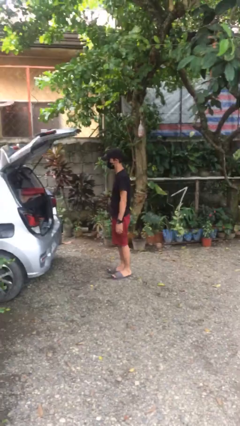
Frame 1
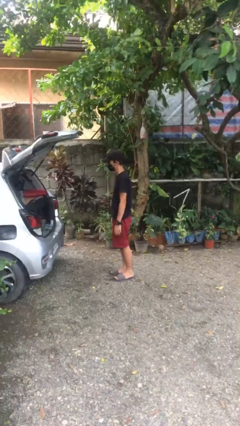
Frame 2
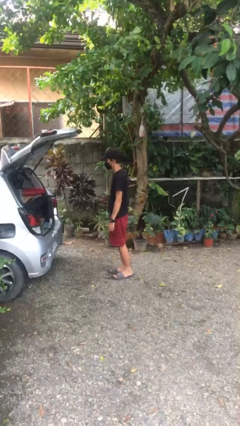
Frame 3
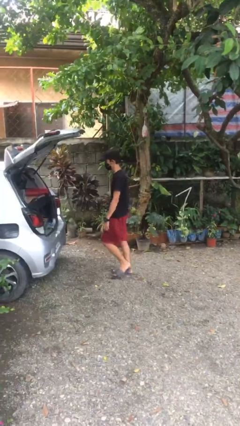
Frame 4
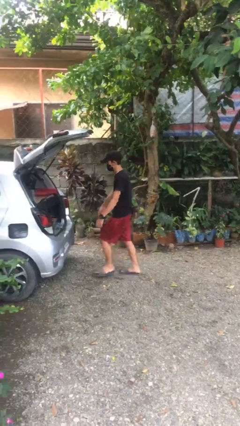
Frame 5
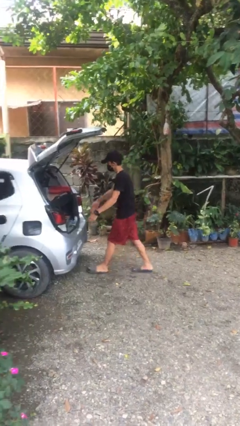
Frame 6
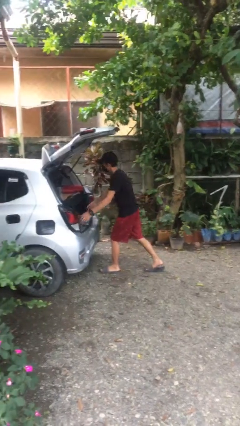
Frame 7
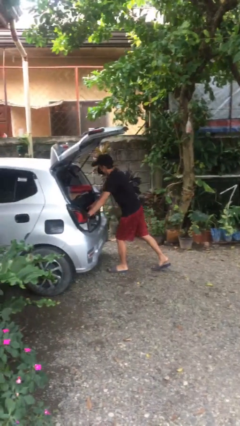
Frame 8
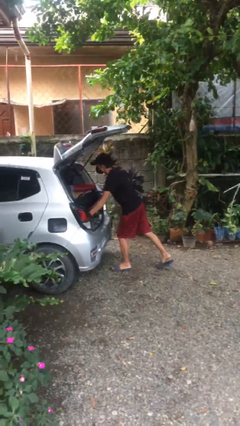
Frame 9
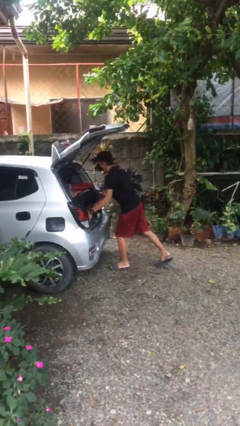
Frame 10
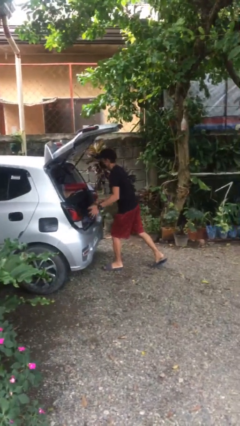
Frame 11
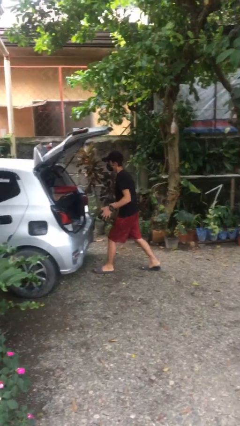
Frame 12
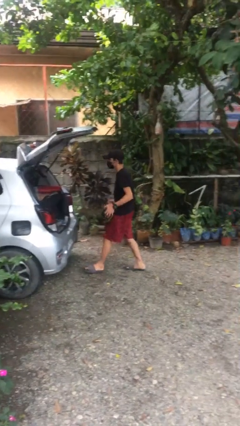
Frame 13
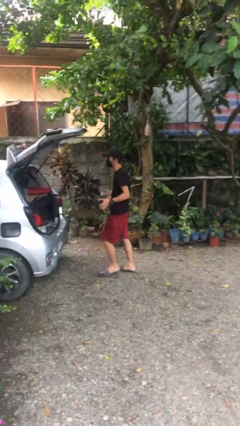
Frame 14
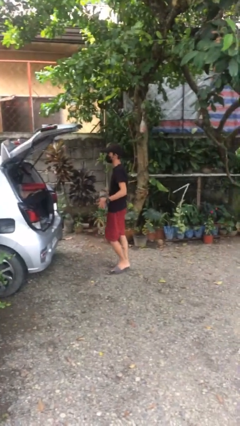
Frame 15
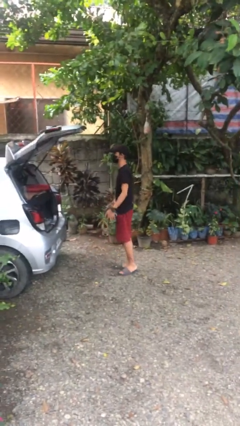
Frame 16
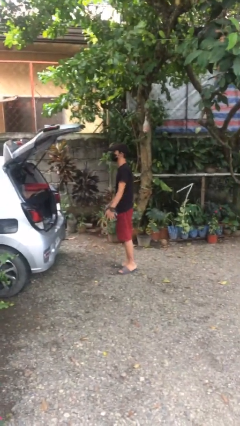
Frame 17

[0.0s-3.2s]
person unloads car

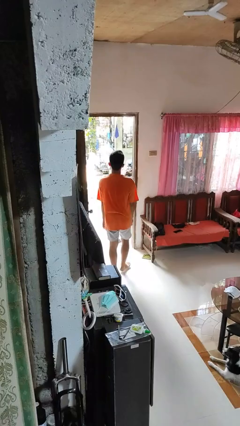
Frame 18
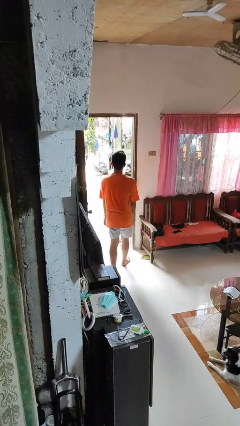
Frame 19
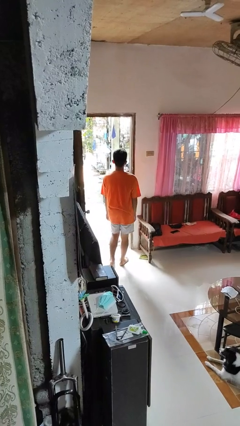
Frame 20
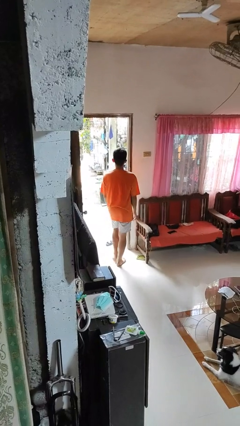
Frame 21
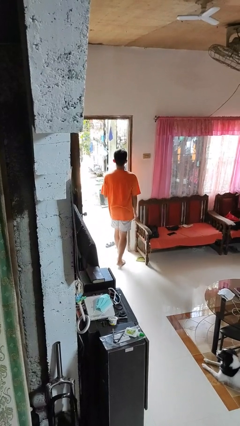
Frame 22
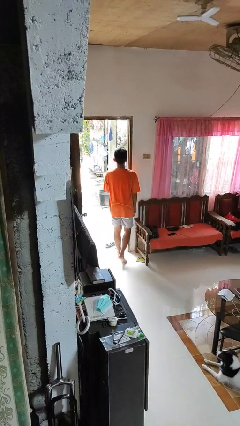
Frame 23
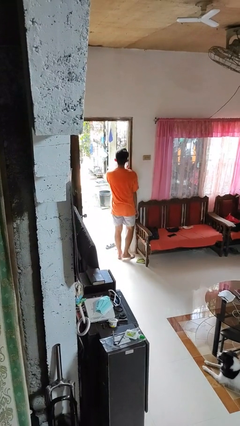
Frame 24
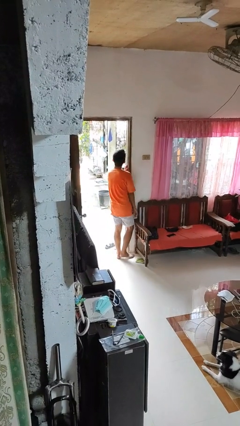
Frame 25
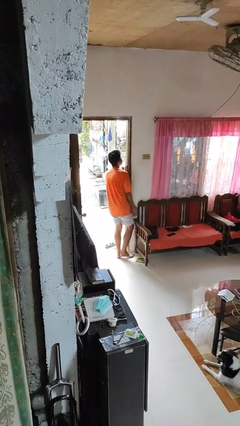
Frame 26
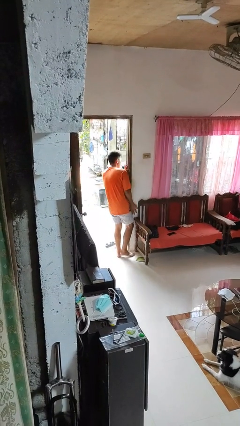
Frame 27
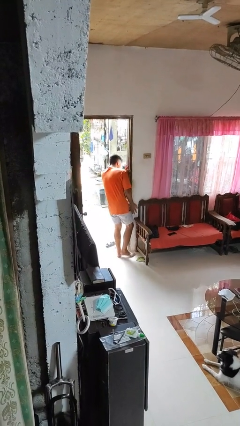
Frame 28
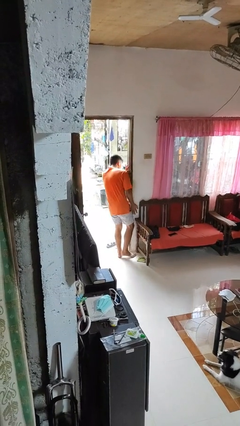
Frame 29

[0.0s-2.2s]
person bumps into wall

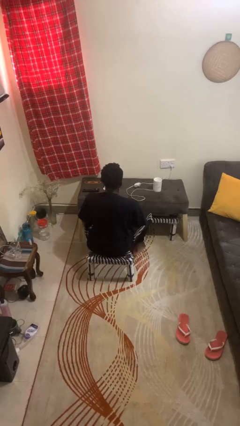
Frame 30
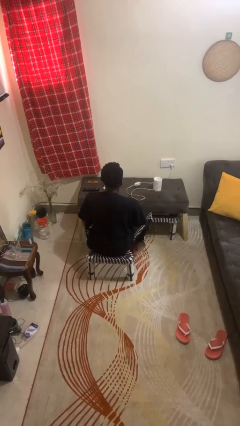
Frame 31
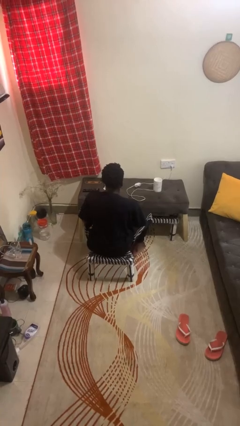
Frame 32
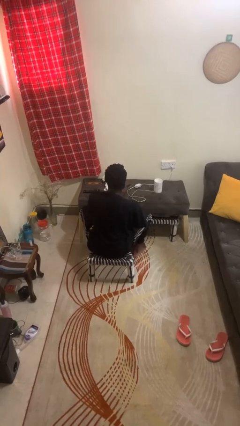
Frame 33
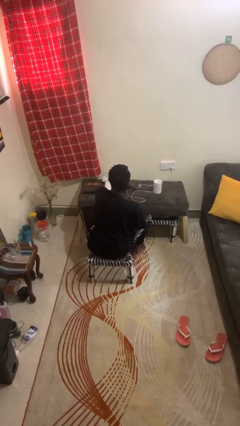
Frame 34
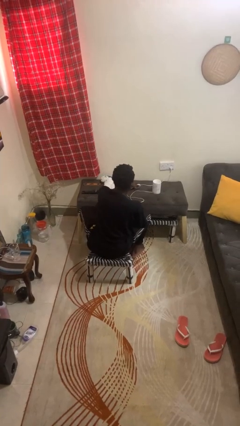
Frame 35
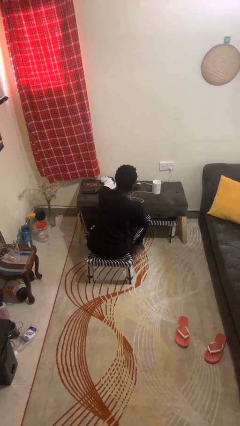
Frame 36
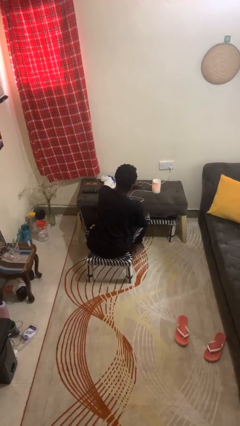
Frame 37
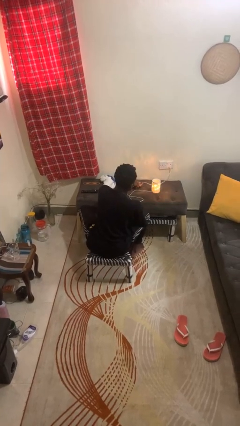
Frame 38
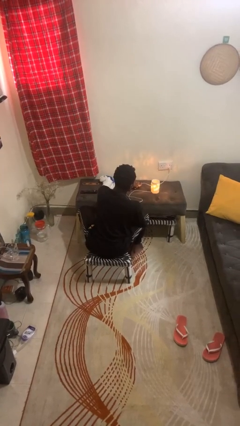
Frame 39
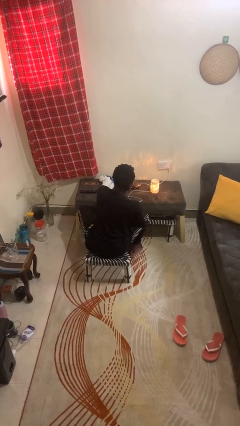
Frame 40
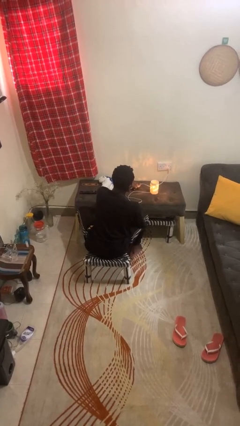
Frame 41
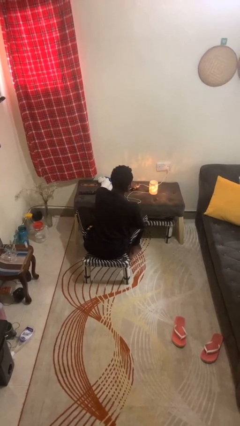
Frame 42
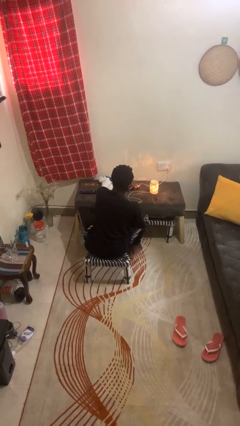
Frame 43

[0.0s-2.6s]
person turns on lamp

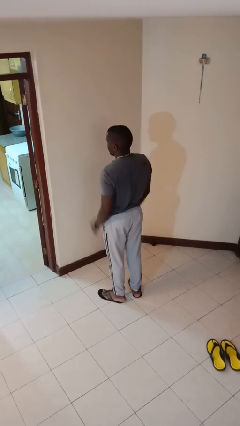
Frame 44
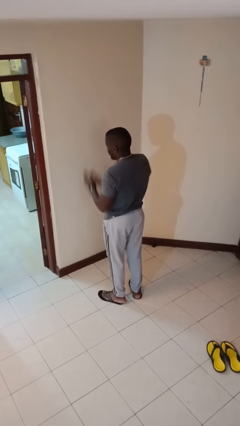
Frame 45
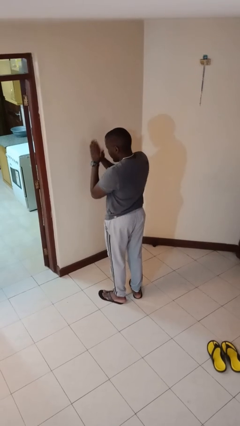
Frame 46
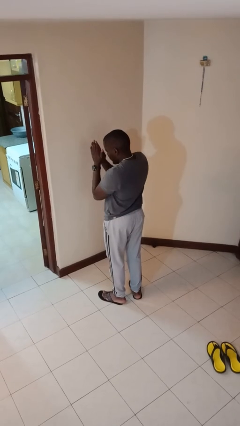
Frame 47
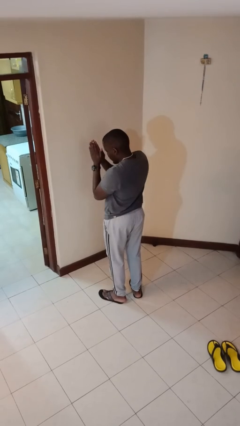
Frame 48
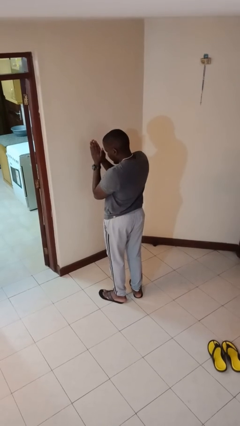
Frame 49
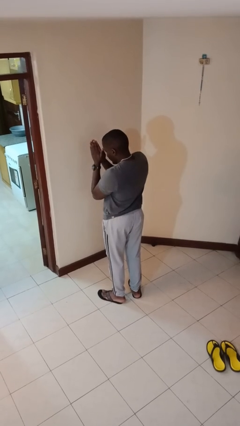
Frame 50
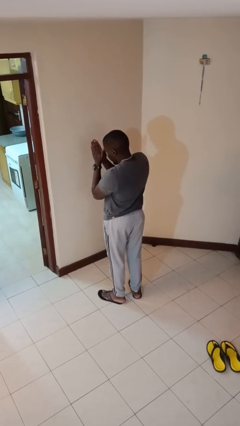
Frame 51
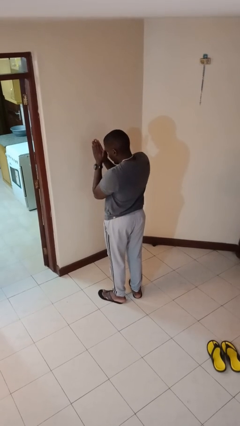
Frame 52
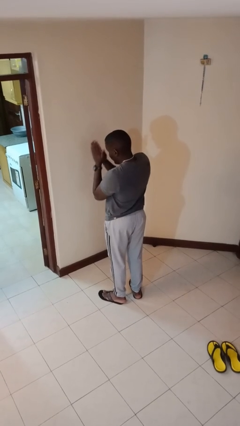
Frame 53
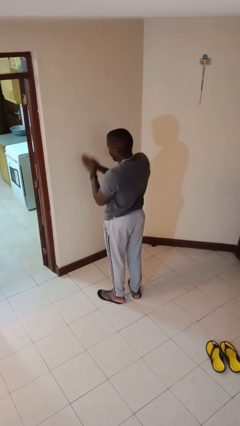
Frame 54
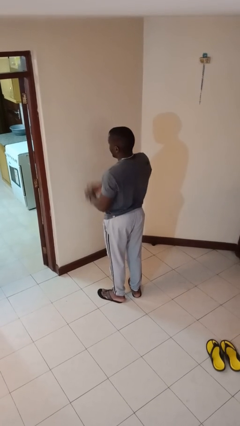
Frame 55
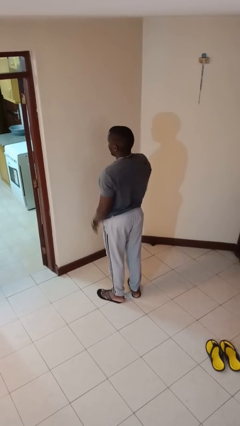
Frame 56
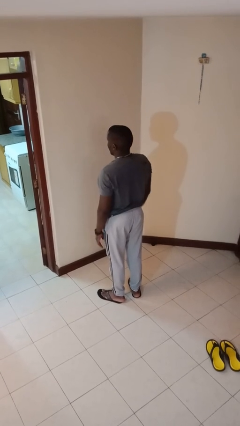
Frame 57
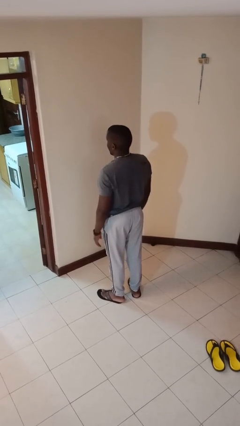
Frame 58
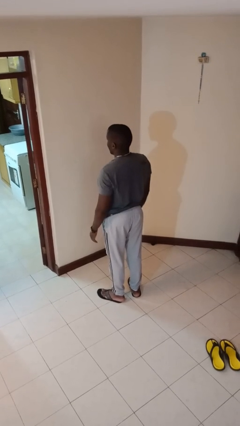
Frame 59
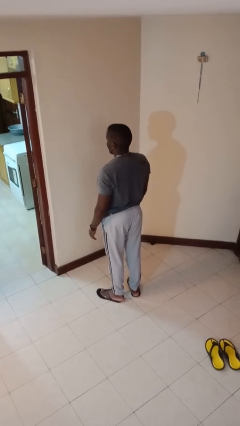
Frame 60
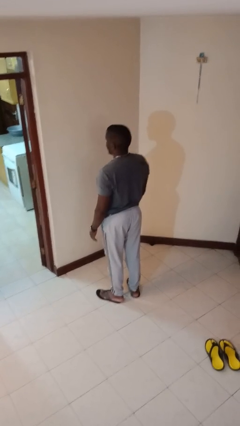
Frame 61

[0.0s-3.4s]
person prays

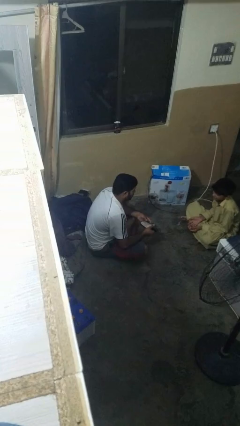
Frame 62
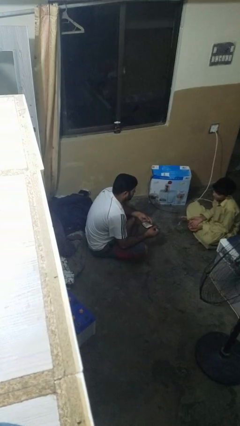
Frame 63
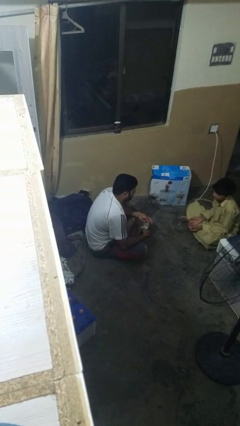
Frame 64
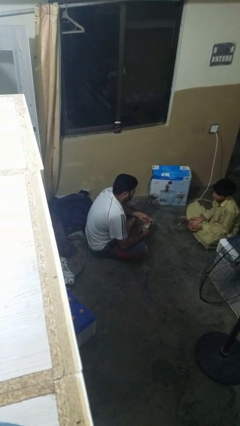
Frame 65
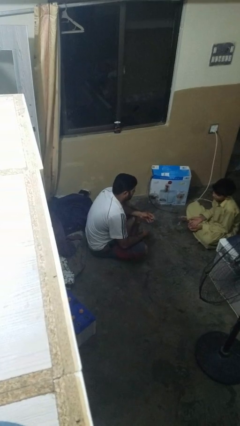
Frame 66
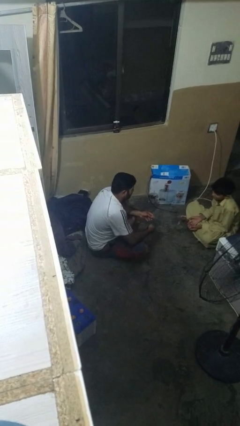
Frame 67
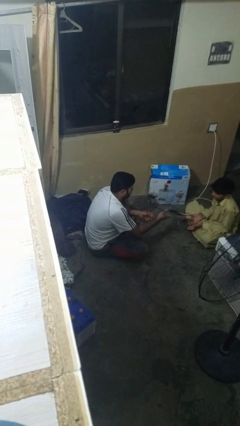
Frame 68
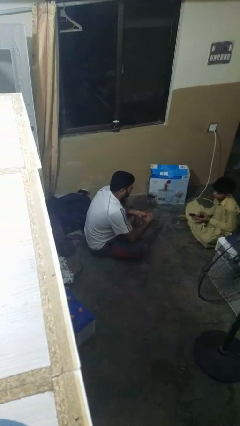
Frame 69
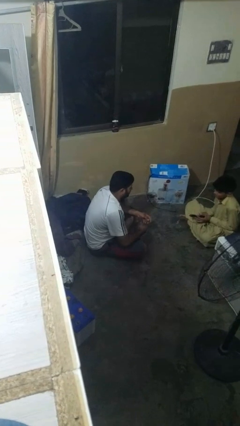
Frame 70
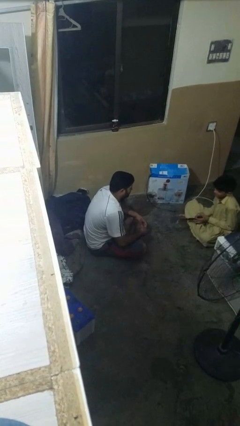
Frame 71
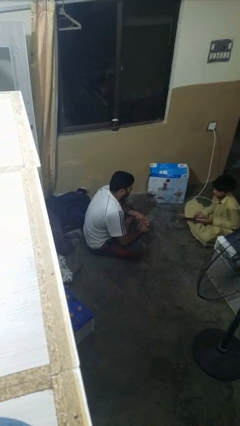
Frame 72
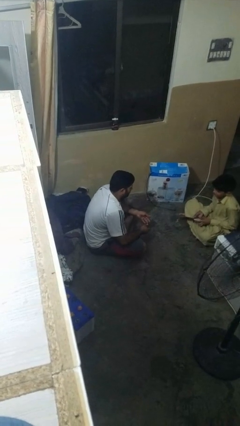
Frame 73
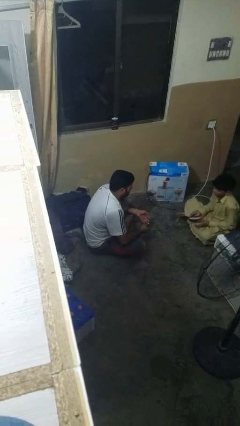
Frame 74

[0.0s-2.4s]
person throws object to person

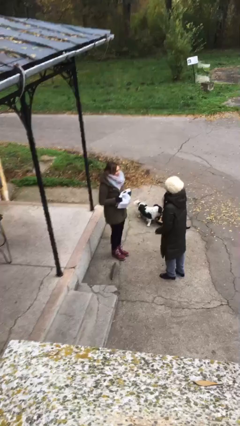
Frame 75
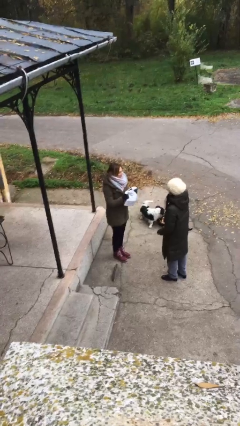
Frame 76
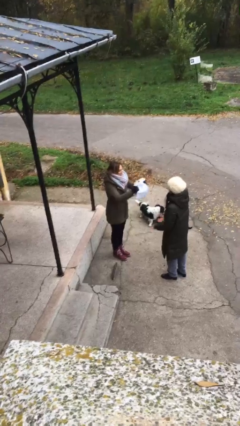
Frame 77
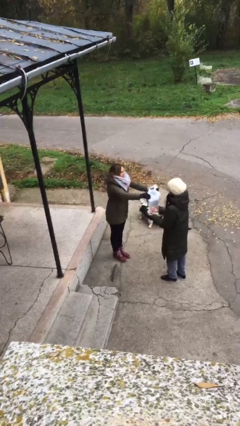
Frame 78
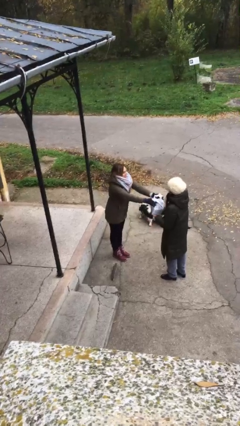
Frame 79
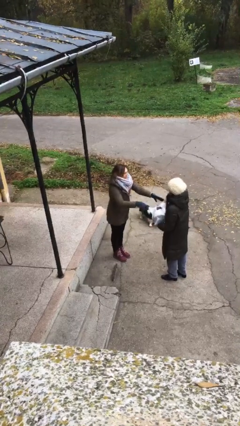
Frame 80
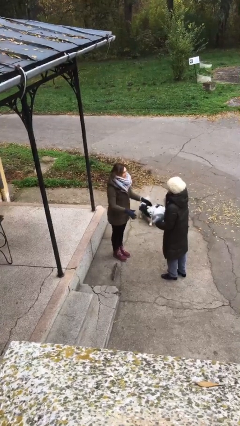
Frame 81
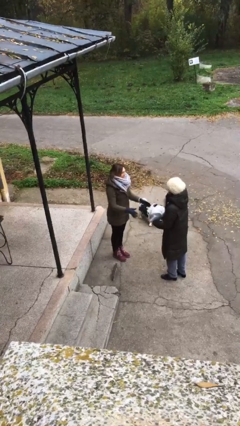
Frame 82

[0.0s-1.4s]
person transfers object to person

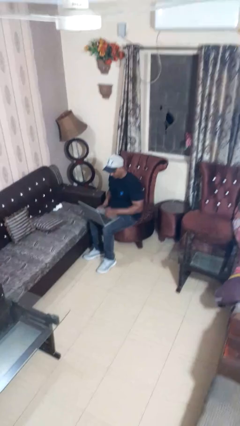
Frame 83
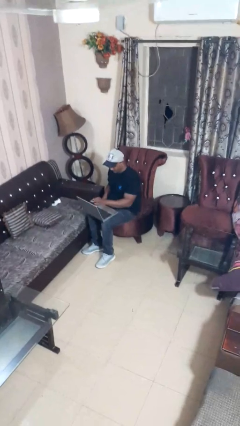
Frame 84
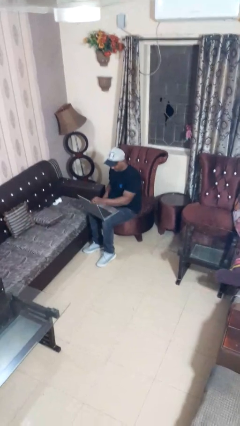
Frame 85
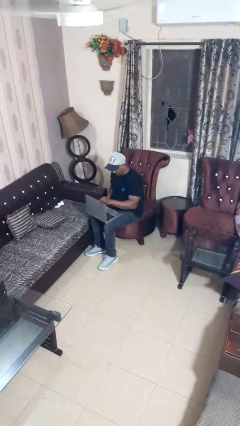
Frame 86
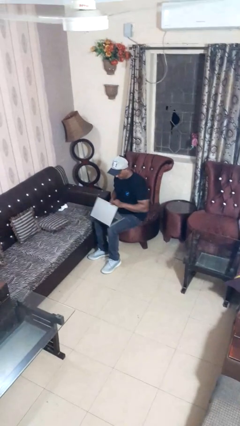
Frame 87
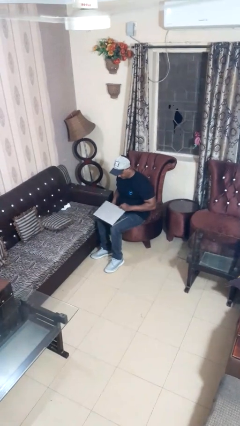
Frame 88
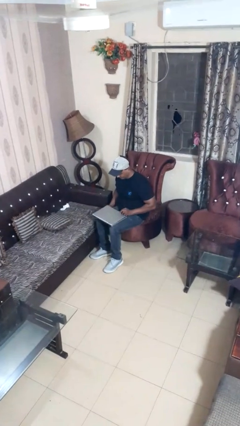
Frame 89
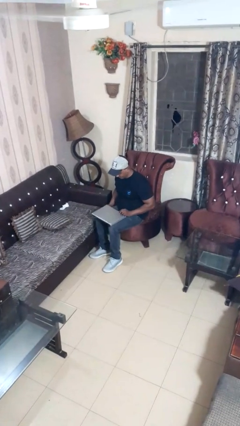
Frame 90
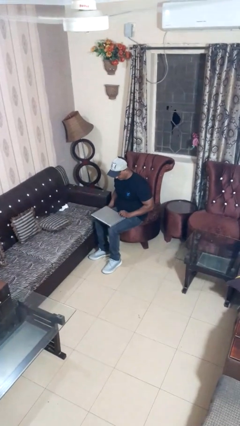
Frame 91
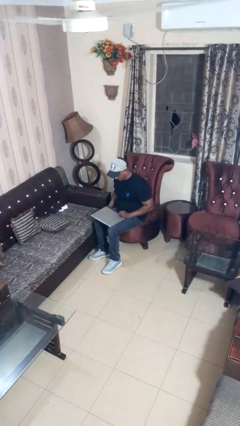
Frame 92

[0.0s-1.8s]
person closes laptop

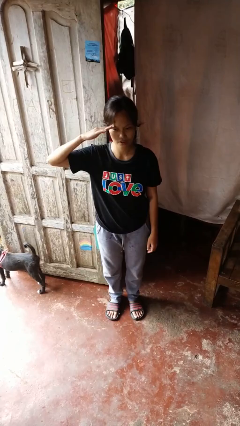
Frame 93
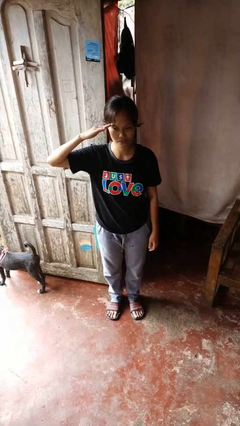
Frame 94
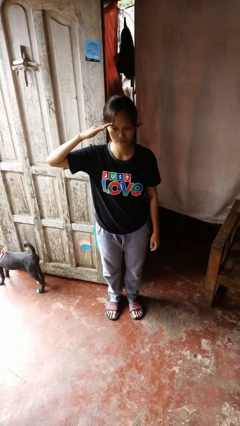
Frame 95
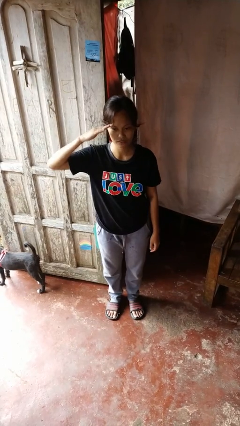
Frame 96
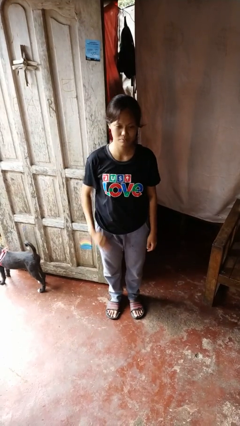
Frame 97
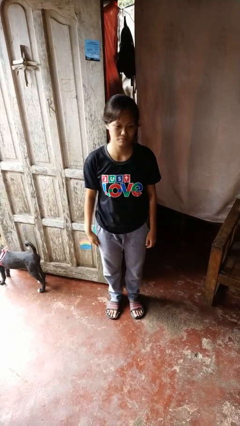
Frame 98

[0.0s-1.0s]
person salutes
